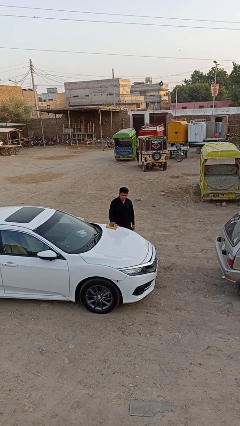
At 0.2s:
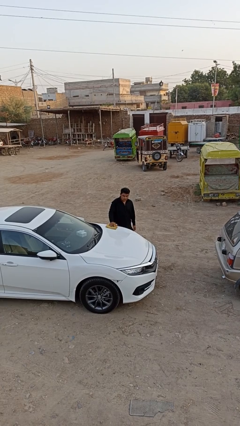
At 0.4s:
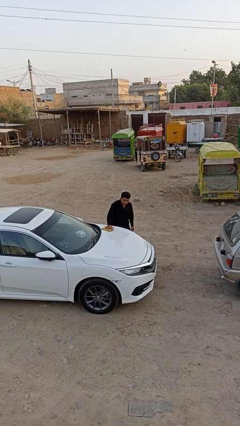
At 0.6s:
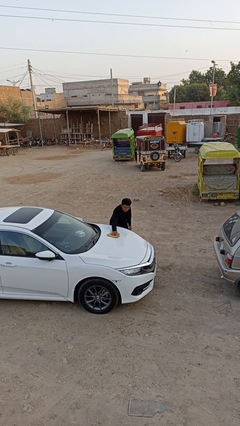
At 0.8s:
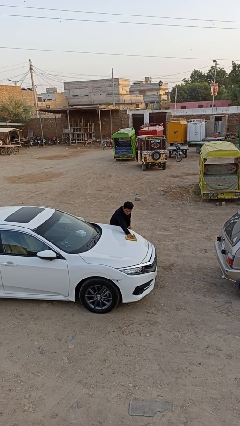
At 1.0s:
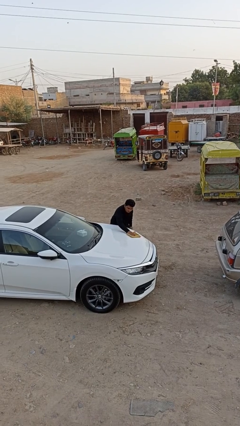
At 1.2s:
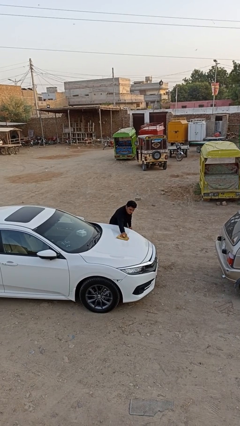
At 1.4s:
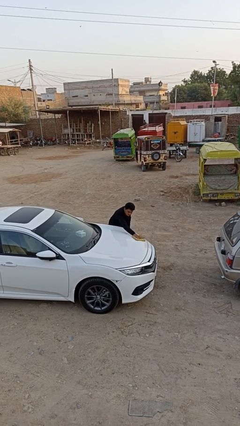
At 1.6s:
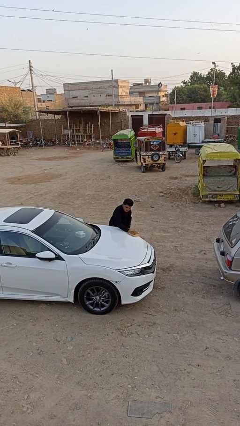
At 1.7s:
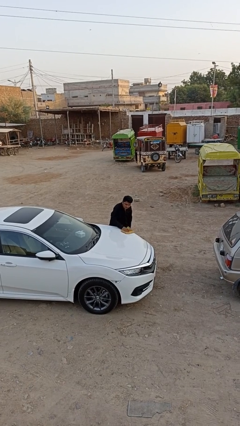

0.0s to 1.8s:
person polishes car with rag

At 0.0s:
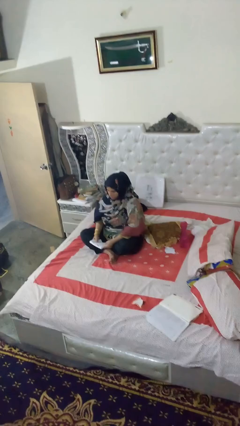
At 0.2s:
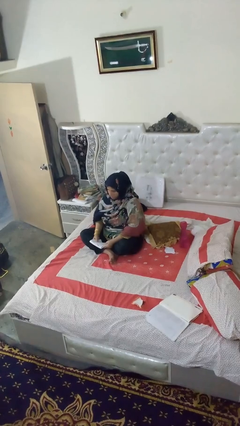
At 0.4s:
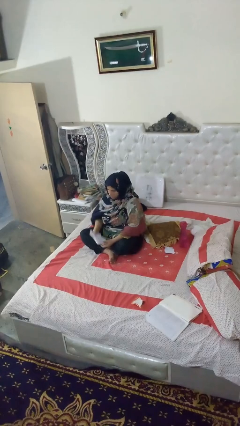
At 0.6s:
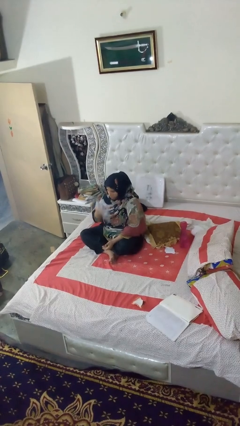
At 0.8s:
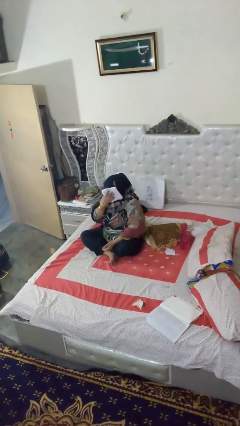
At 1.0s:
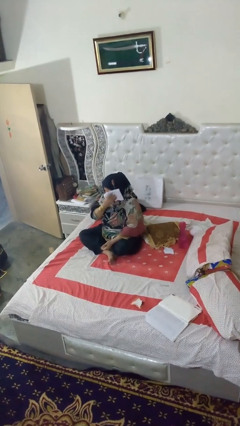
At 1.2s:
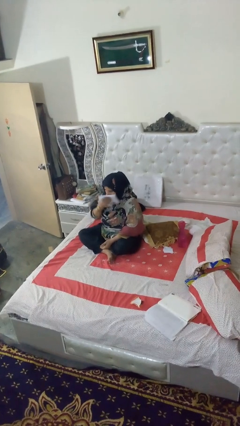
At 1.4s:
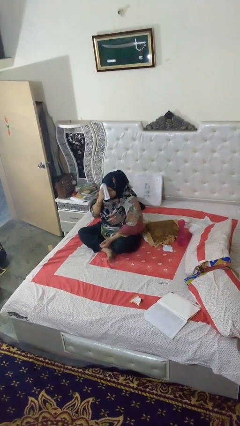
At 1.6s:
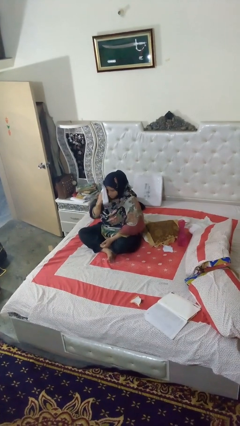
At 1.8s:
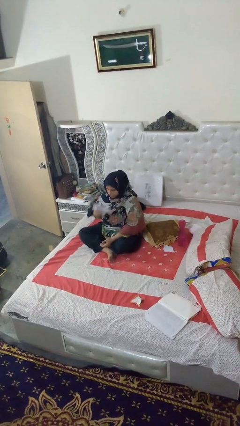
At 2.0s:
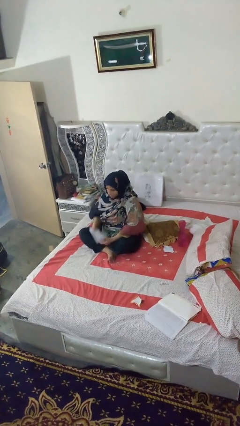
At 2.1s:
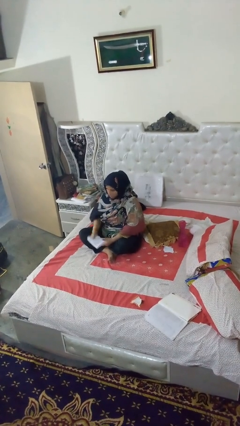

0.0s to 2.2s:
person wipes mouth with napkin

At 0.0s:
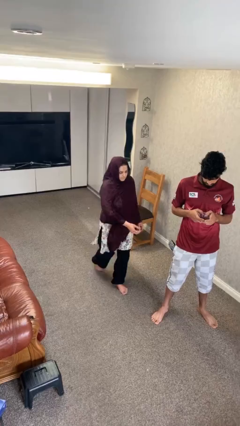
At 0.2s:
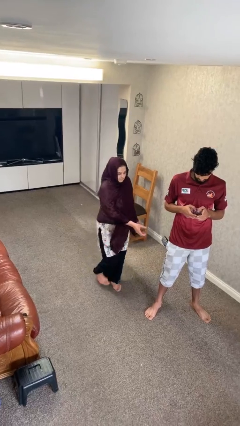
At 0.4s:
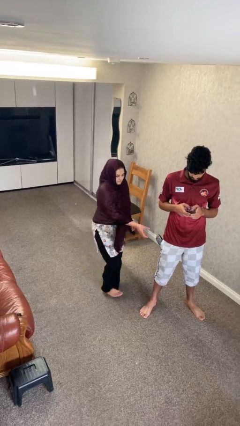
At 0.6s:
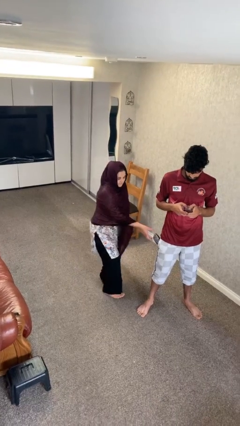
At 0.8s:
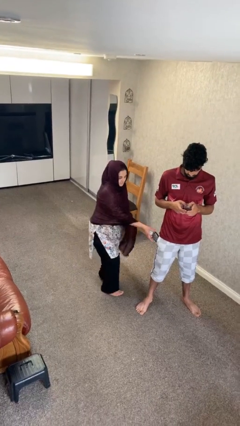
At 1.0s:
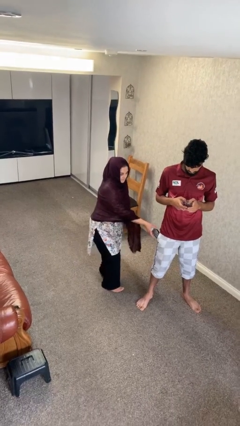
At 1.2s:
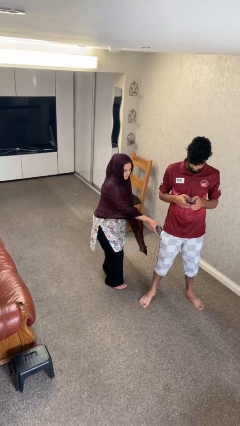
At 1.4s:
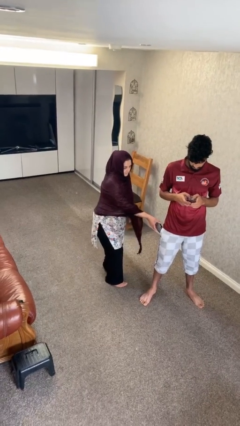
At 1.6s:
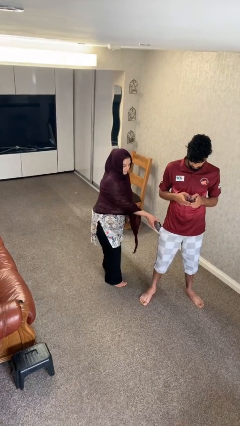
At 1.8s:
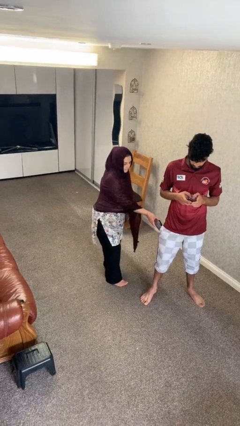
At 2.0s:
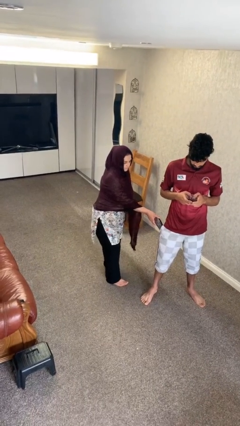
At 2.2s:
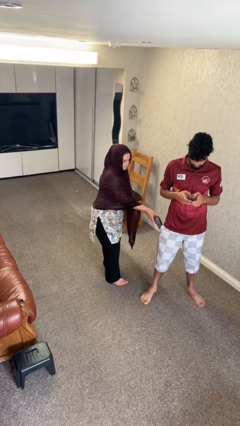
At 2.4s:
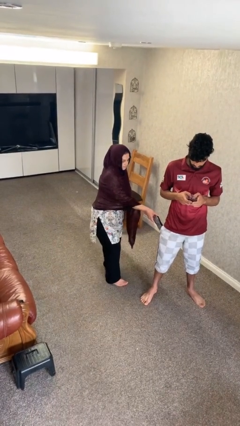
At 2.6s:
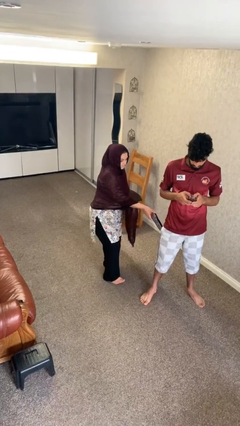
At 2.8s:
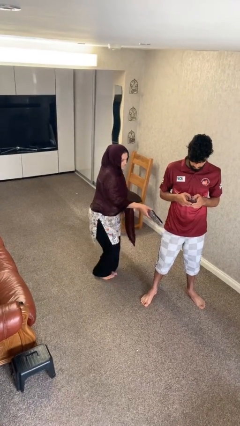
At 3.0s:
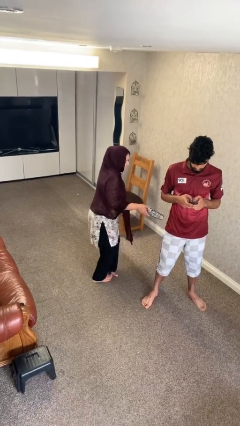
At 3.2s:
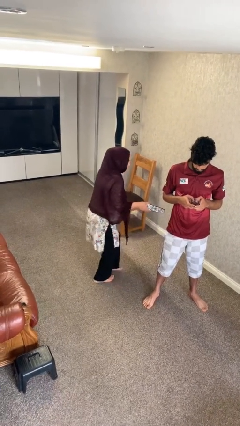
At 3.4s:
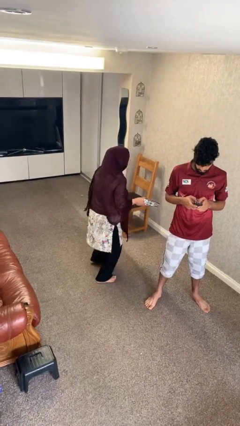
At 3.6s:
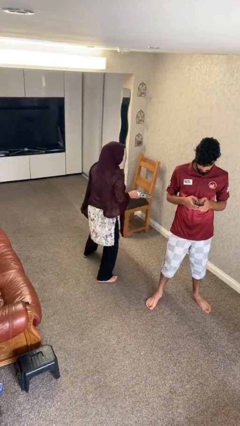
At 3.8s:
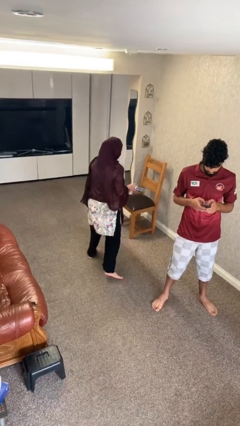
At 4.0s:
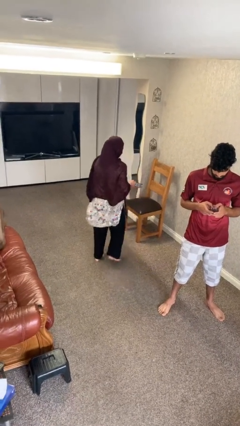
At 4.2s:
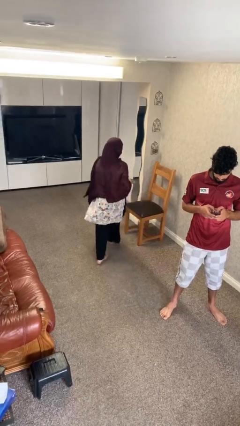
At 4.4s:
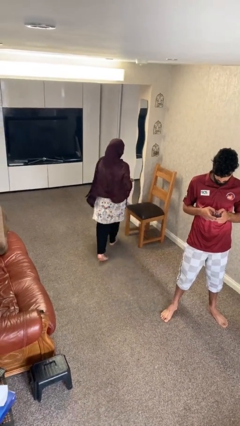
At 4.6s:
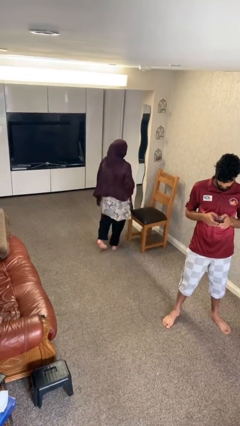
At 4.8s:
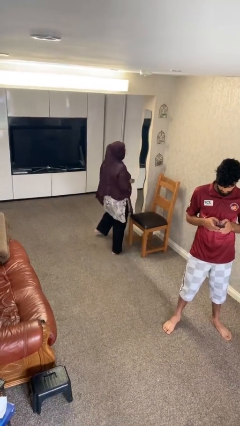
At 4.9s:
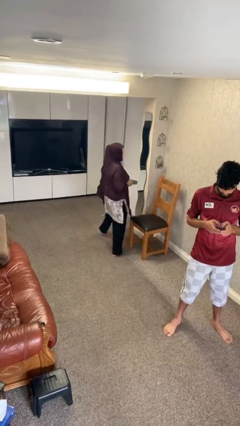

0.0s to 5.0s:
person steals object from person

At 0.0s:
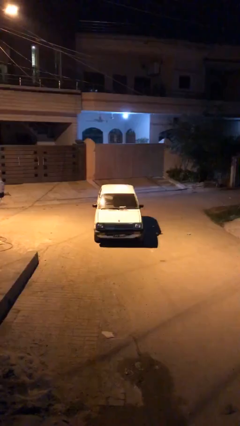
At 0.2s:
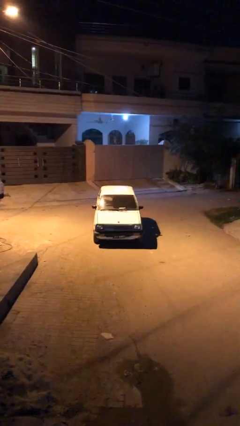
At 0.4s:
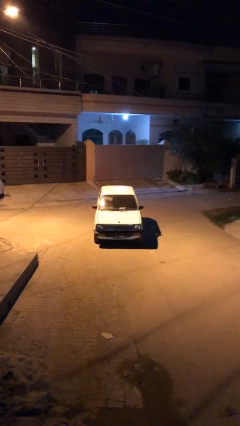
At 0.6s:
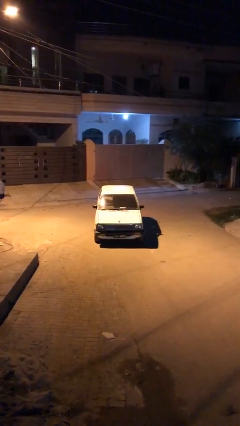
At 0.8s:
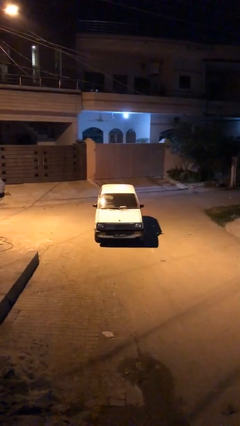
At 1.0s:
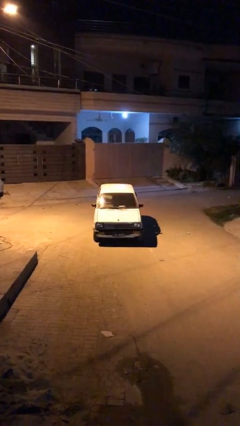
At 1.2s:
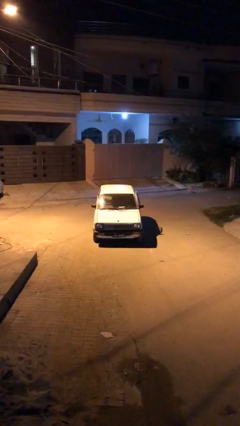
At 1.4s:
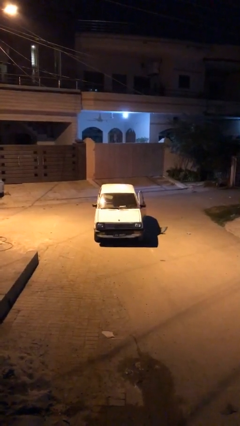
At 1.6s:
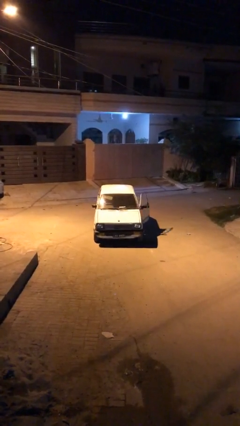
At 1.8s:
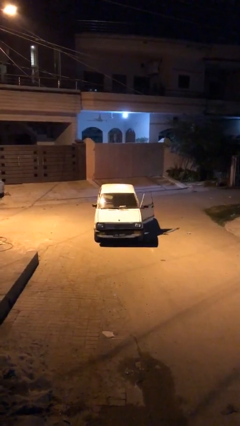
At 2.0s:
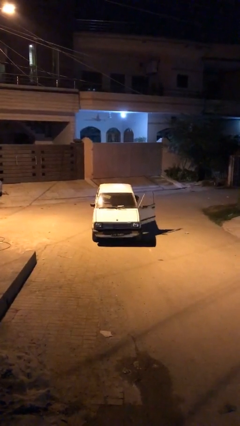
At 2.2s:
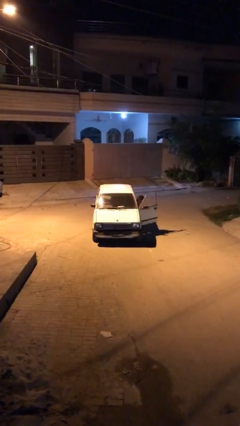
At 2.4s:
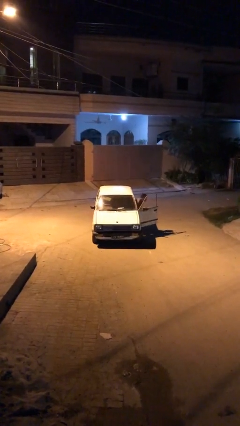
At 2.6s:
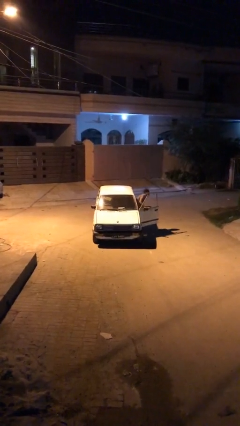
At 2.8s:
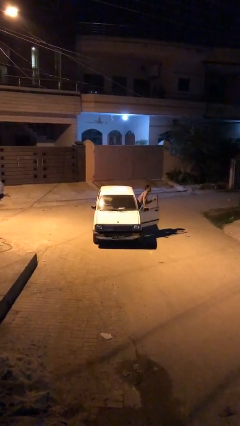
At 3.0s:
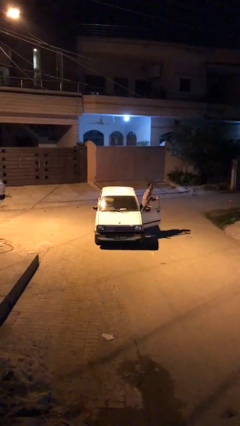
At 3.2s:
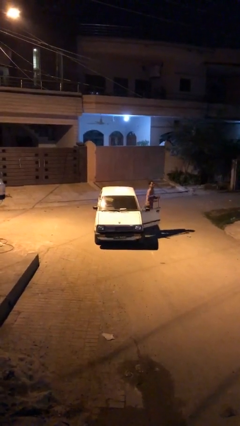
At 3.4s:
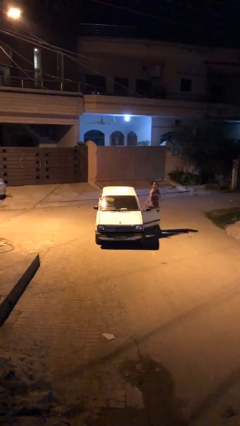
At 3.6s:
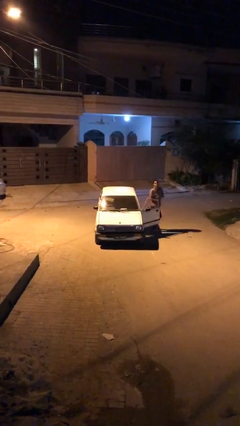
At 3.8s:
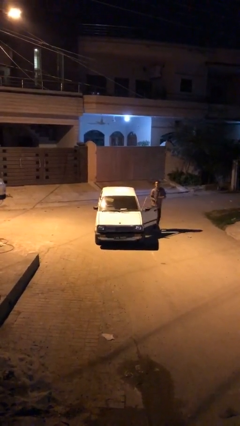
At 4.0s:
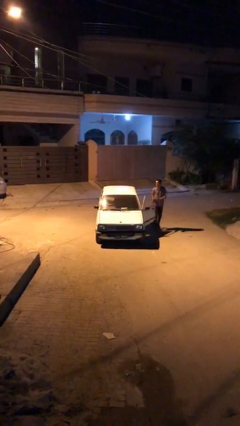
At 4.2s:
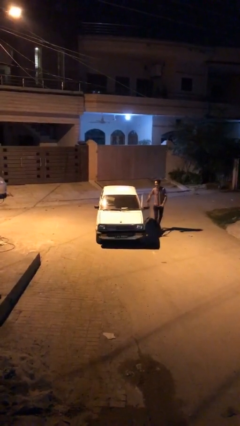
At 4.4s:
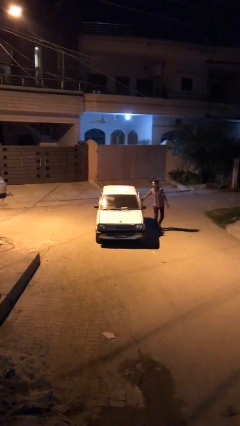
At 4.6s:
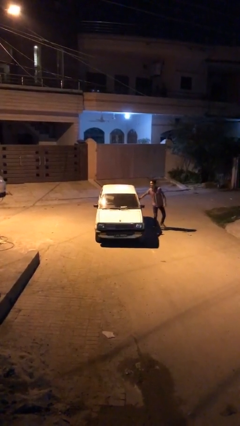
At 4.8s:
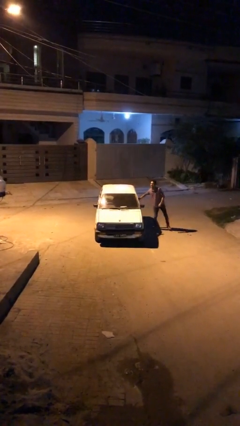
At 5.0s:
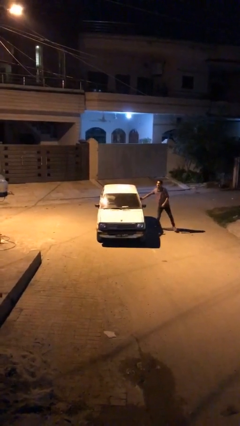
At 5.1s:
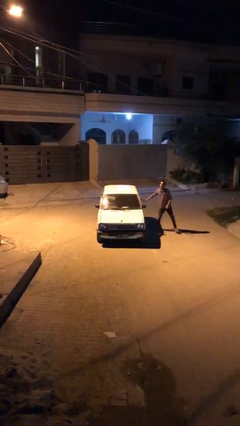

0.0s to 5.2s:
car drops off person

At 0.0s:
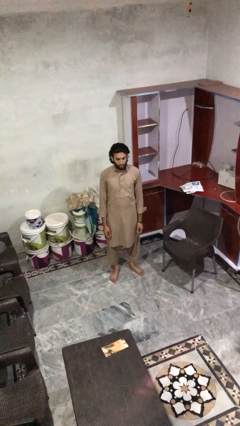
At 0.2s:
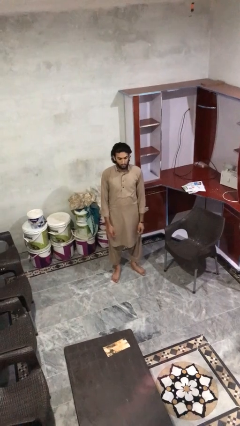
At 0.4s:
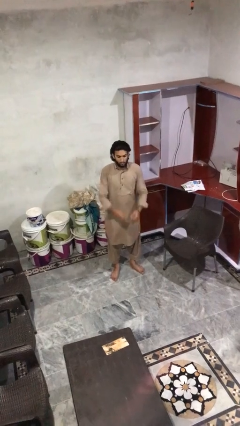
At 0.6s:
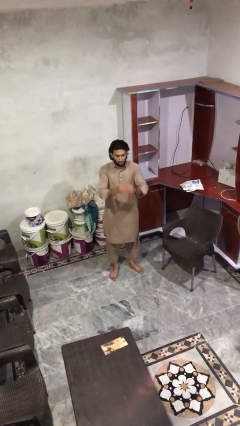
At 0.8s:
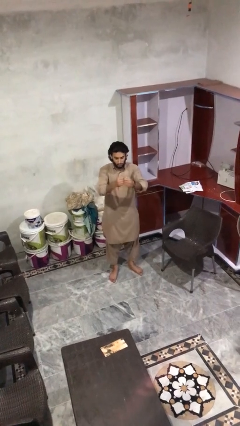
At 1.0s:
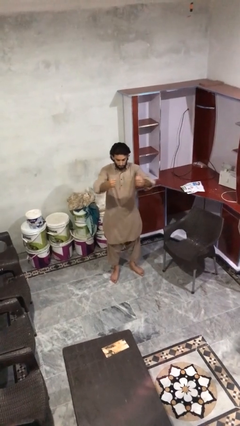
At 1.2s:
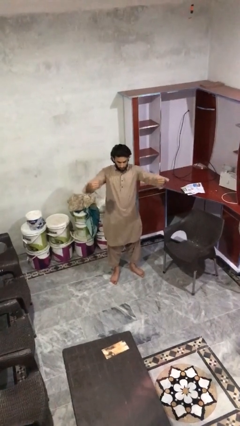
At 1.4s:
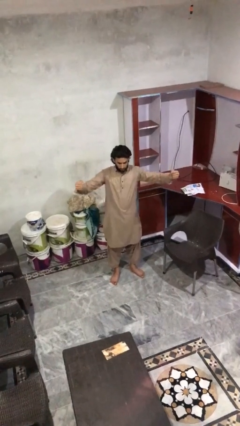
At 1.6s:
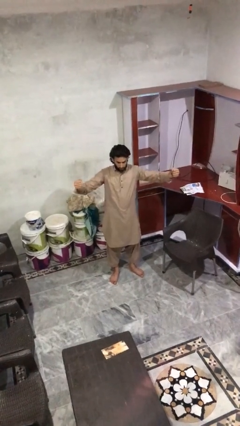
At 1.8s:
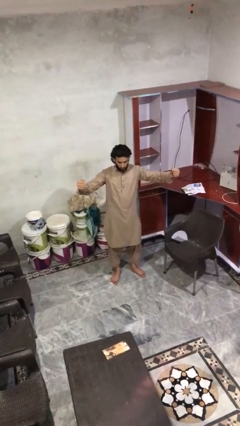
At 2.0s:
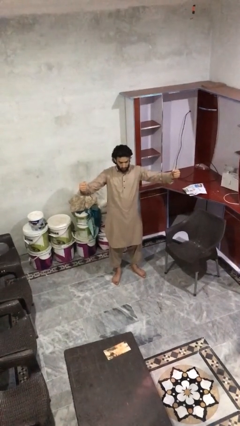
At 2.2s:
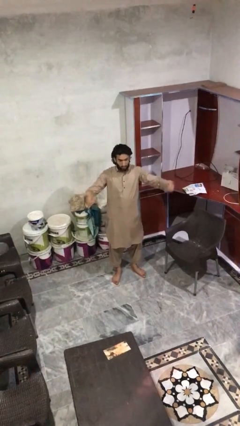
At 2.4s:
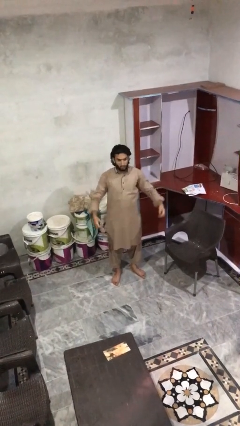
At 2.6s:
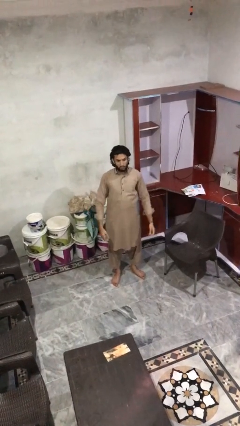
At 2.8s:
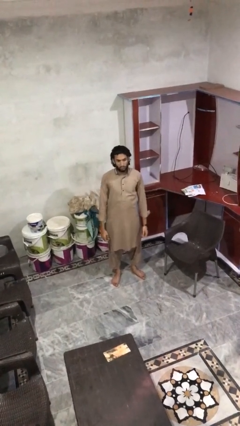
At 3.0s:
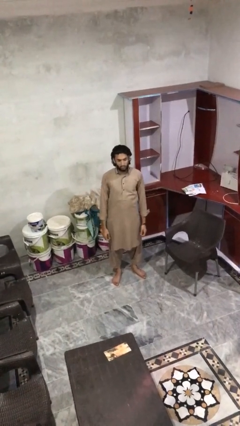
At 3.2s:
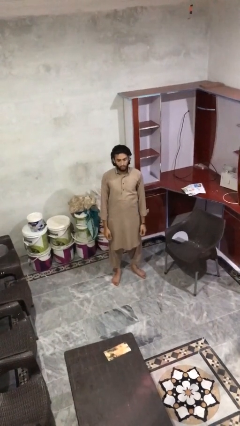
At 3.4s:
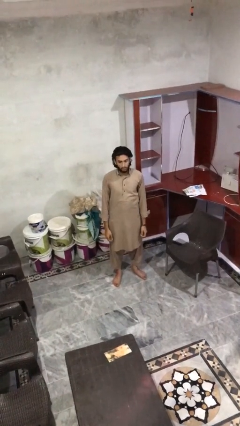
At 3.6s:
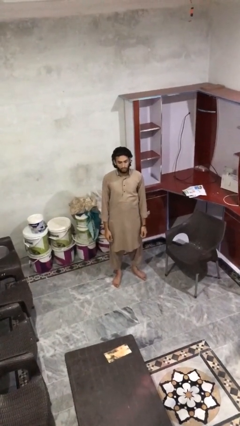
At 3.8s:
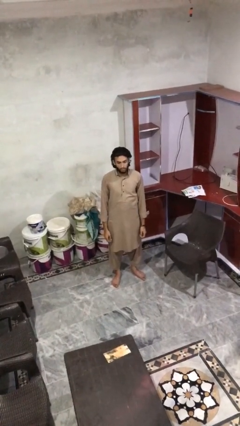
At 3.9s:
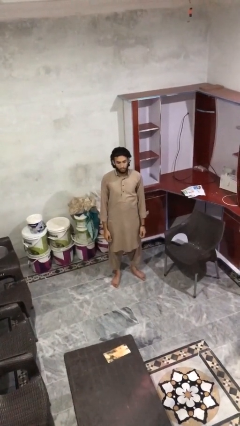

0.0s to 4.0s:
person gestures zoom in
